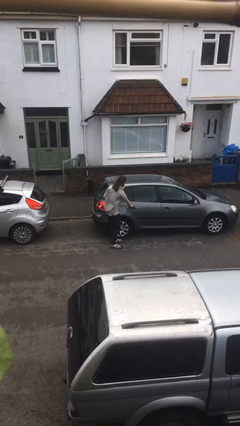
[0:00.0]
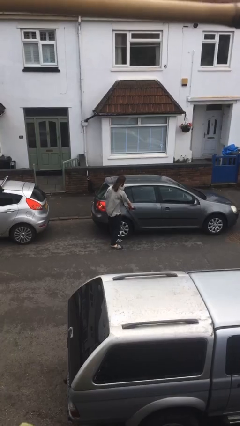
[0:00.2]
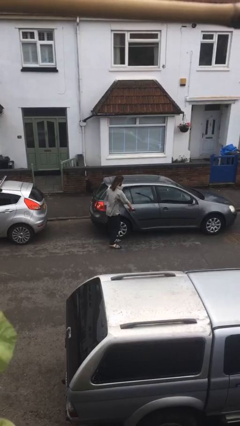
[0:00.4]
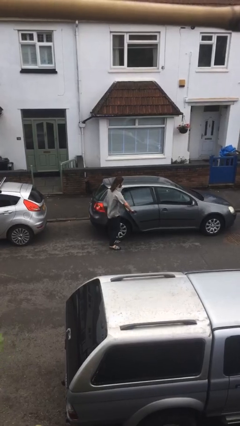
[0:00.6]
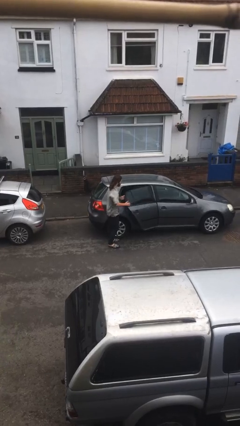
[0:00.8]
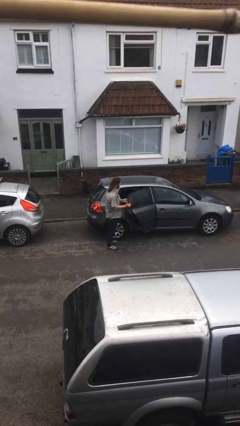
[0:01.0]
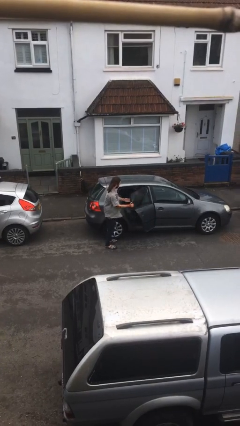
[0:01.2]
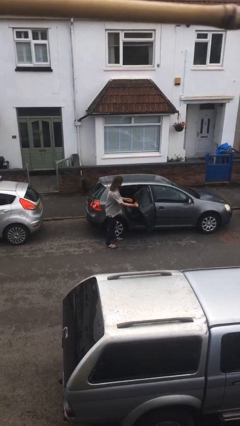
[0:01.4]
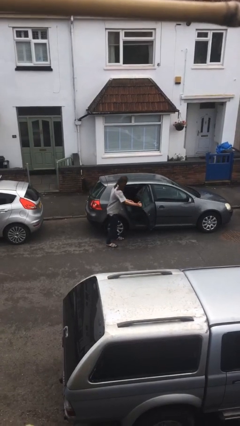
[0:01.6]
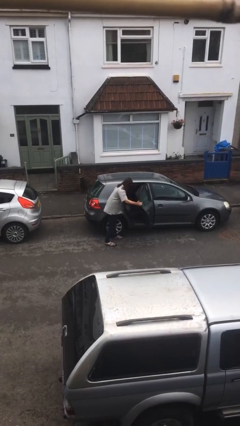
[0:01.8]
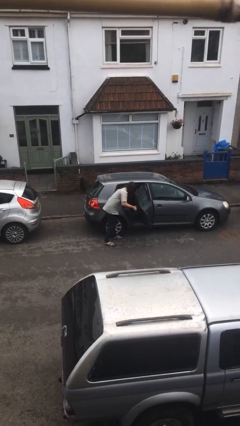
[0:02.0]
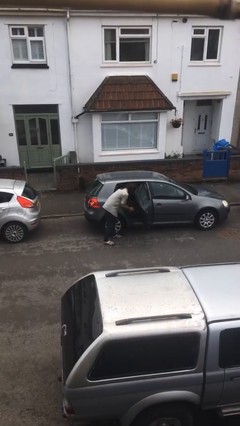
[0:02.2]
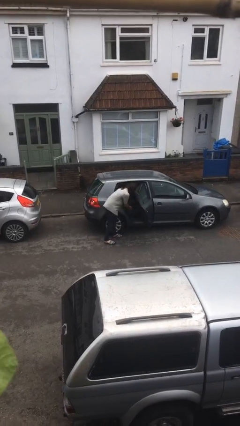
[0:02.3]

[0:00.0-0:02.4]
person opens car door

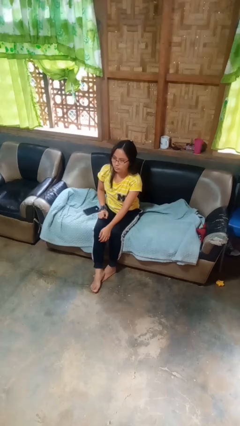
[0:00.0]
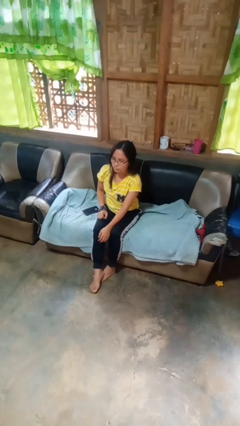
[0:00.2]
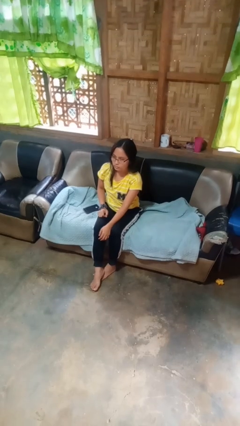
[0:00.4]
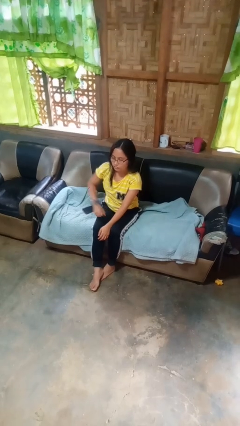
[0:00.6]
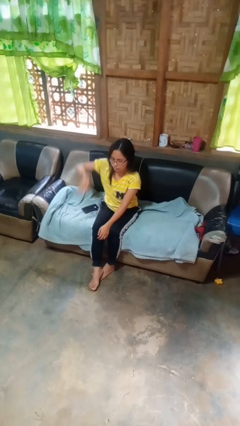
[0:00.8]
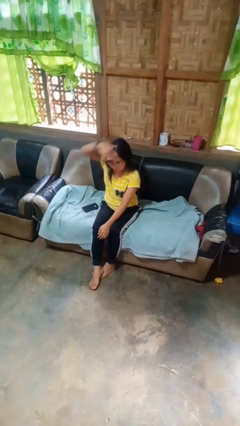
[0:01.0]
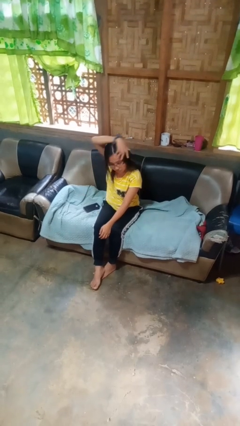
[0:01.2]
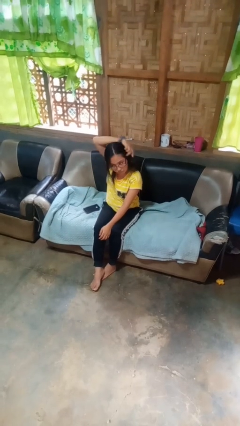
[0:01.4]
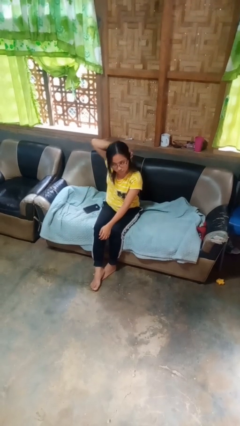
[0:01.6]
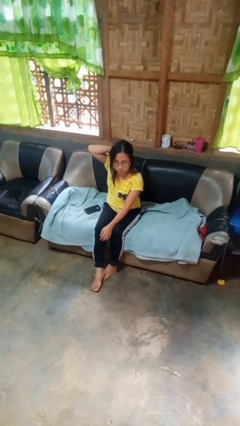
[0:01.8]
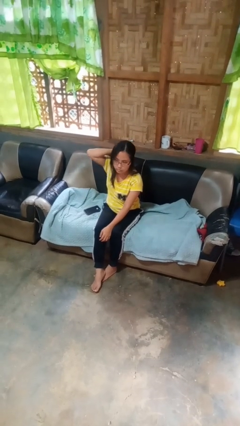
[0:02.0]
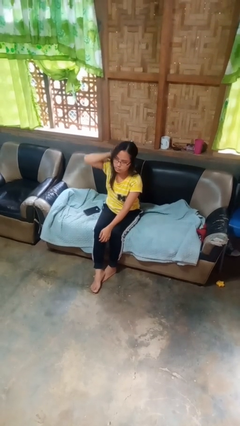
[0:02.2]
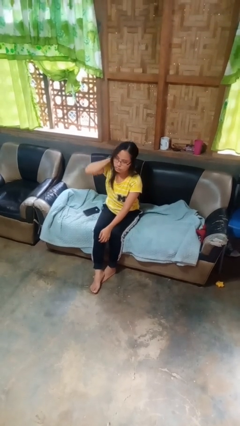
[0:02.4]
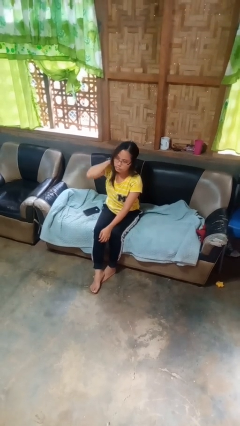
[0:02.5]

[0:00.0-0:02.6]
person strokes hair

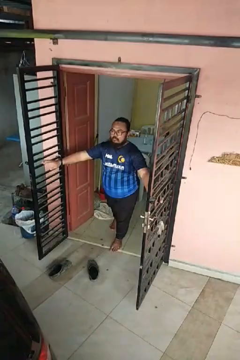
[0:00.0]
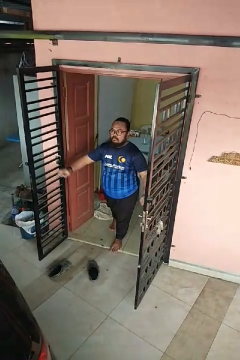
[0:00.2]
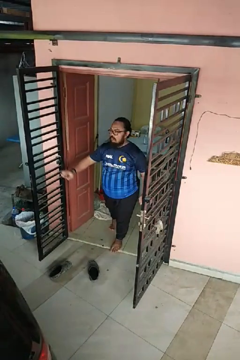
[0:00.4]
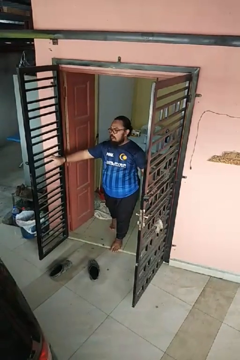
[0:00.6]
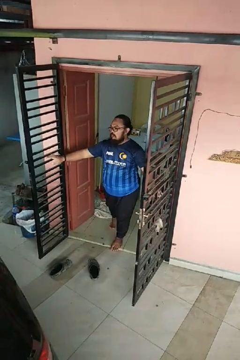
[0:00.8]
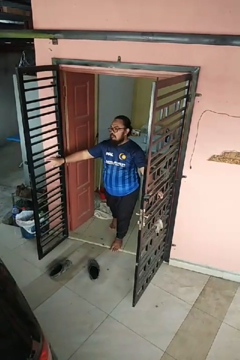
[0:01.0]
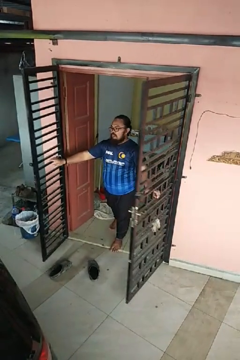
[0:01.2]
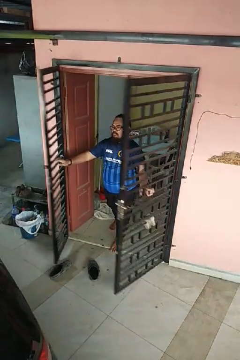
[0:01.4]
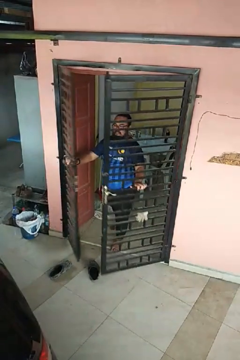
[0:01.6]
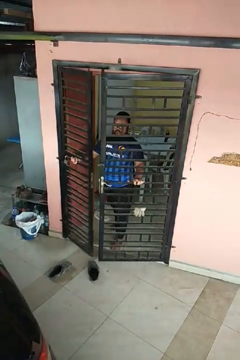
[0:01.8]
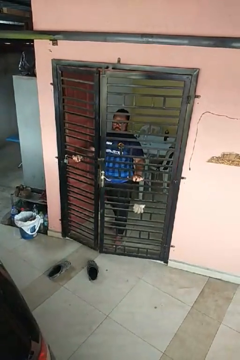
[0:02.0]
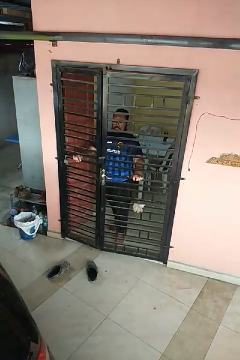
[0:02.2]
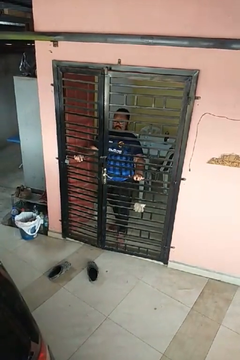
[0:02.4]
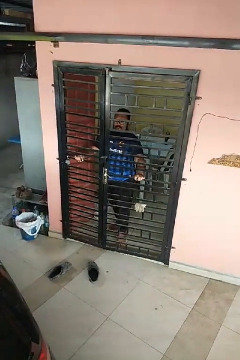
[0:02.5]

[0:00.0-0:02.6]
person closes gate

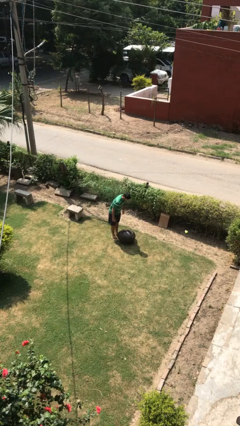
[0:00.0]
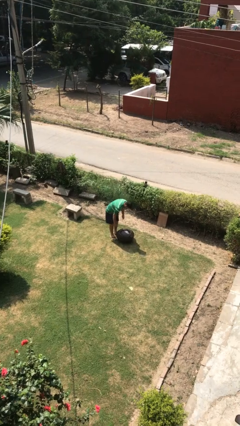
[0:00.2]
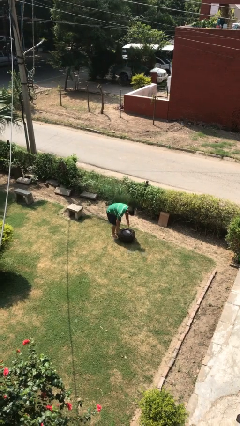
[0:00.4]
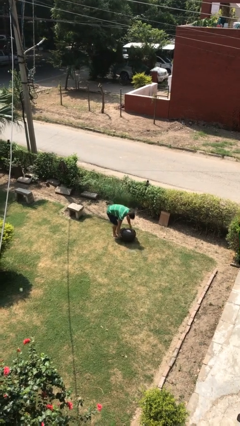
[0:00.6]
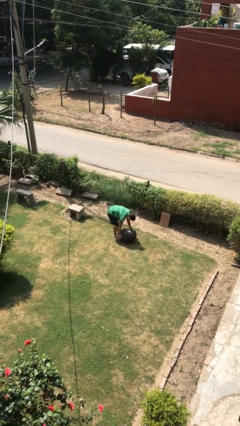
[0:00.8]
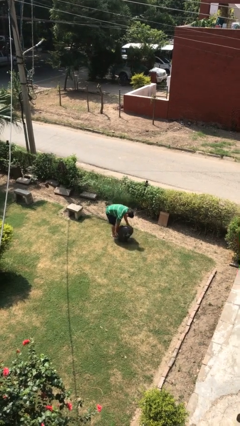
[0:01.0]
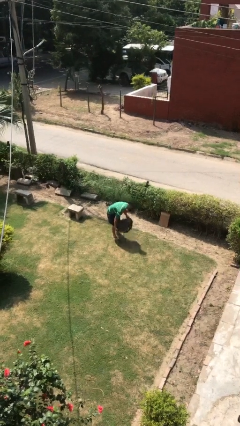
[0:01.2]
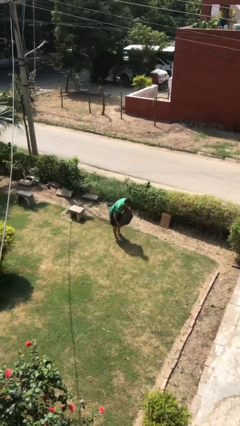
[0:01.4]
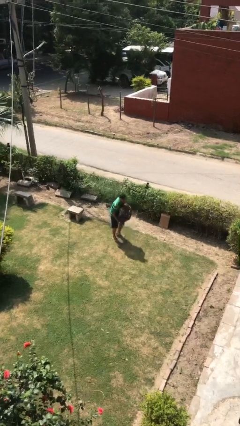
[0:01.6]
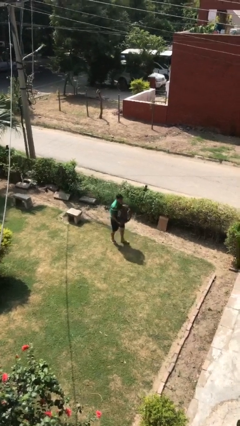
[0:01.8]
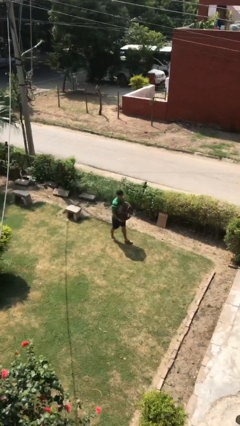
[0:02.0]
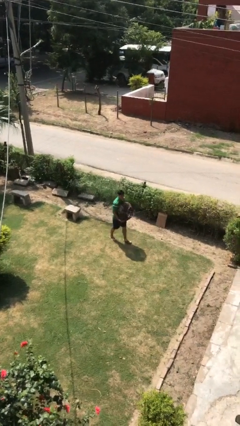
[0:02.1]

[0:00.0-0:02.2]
person picks up object from floor

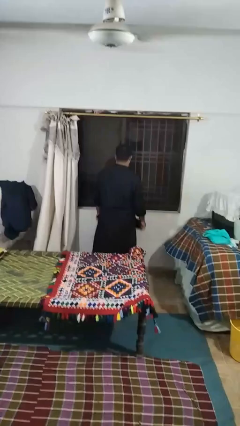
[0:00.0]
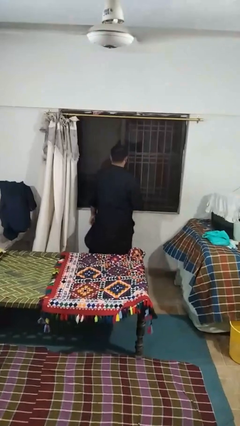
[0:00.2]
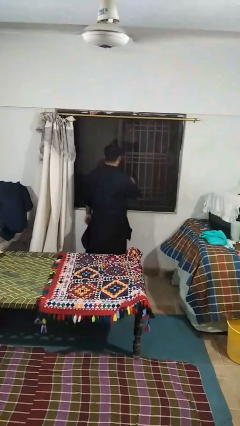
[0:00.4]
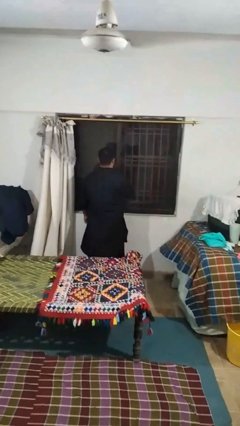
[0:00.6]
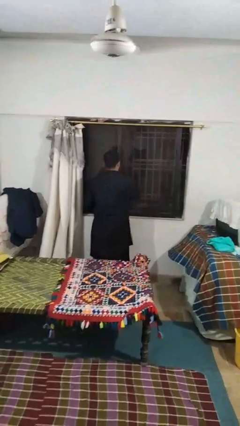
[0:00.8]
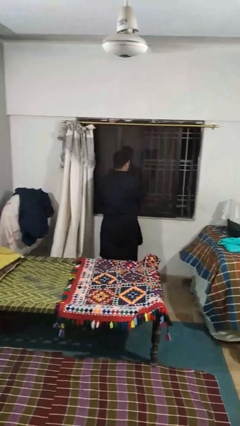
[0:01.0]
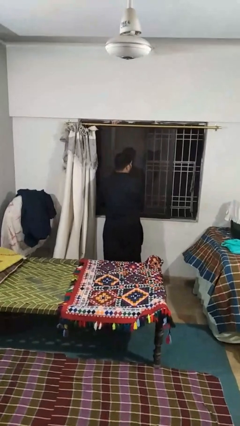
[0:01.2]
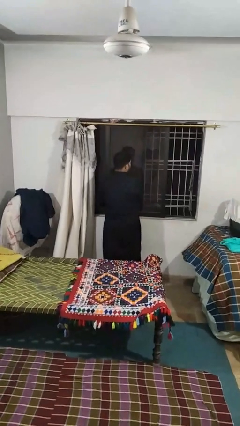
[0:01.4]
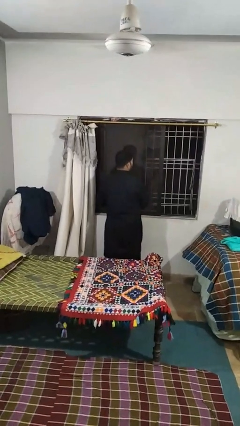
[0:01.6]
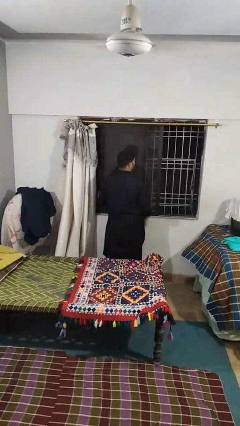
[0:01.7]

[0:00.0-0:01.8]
person opens sliding door

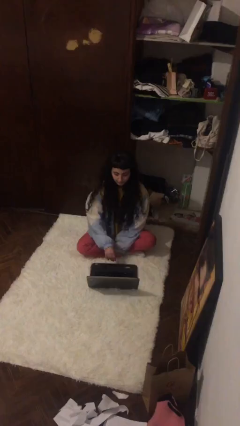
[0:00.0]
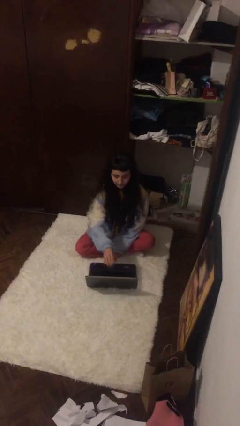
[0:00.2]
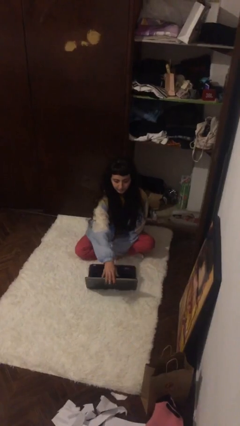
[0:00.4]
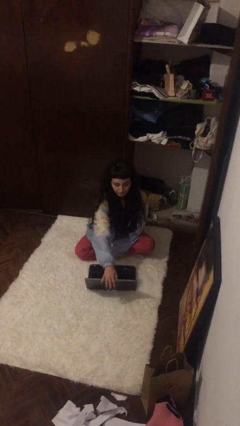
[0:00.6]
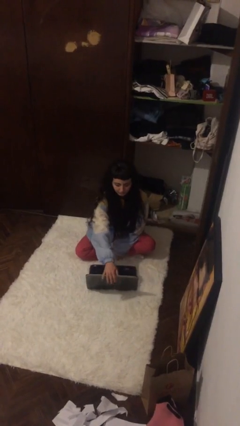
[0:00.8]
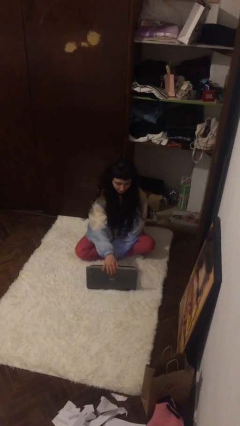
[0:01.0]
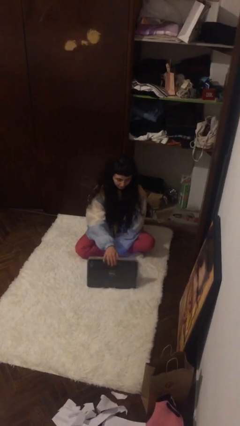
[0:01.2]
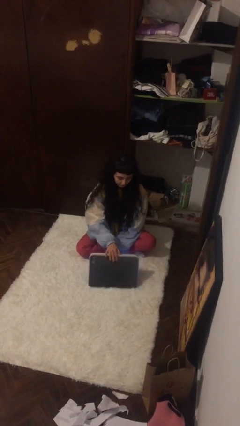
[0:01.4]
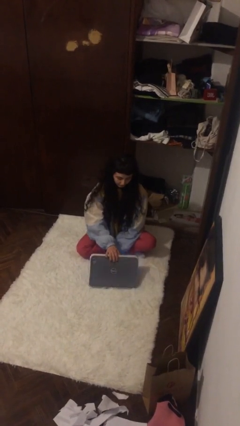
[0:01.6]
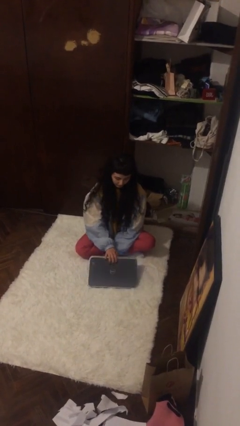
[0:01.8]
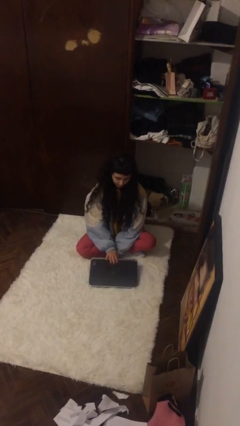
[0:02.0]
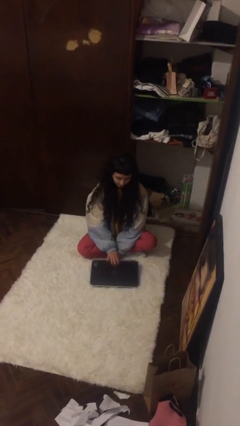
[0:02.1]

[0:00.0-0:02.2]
person closes laptop

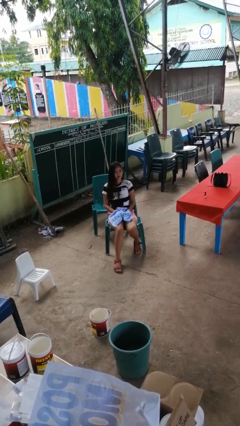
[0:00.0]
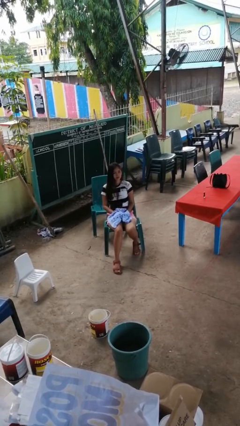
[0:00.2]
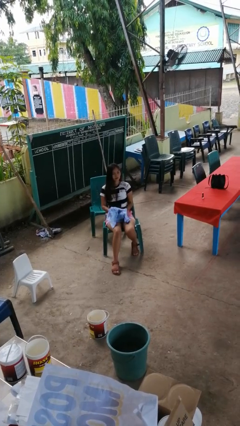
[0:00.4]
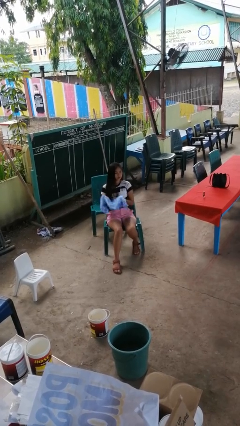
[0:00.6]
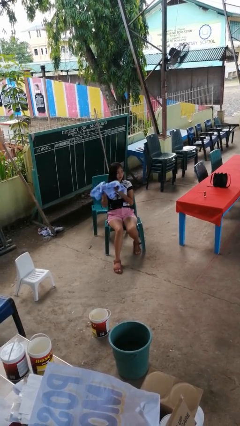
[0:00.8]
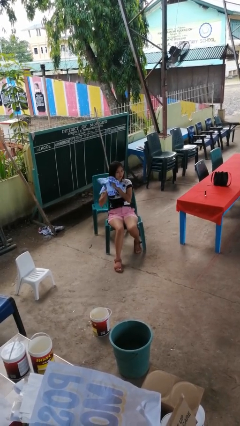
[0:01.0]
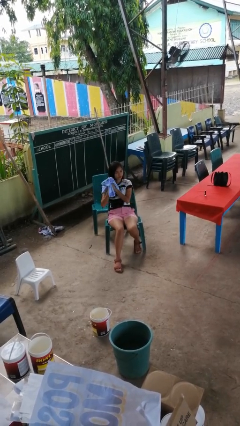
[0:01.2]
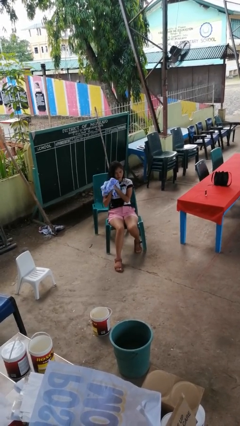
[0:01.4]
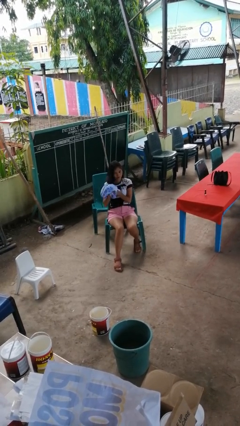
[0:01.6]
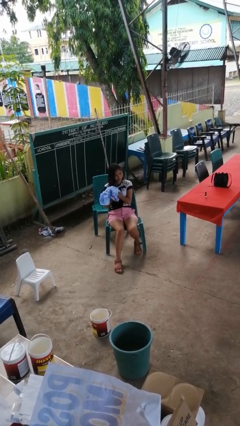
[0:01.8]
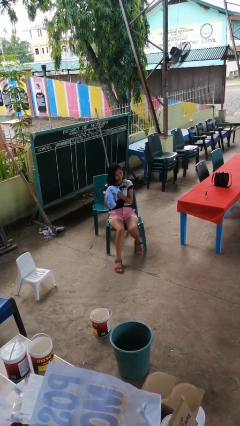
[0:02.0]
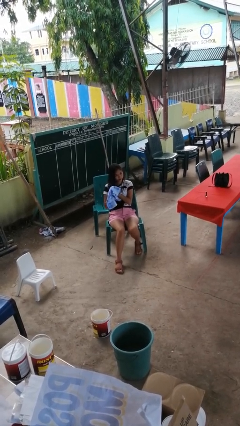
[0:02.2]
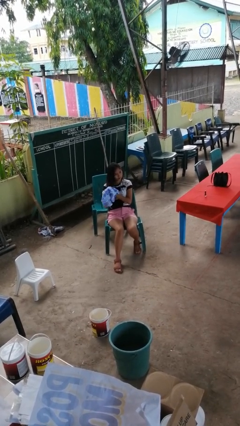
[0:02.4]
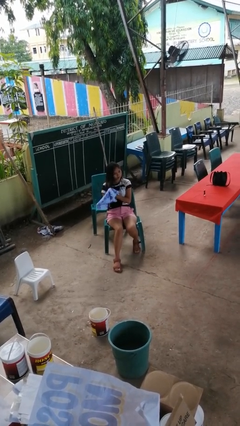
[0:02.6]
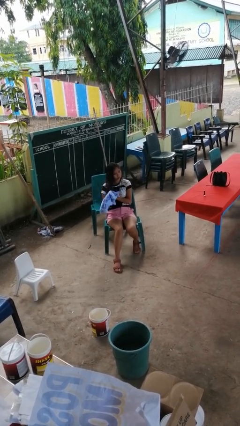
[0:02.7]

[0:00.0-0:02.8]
person dries hair with towel

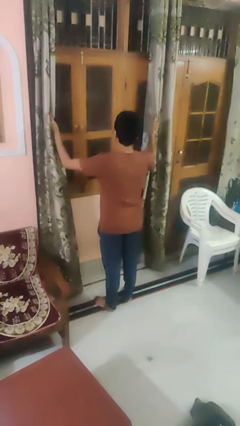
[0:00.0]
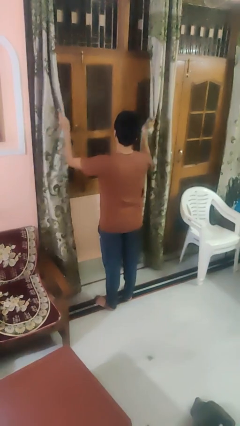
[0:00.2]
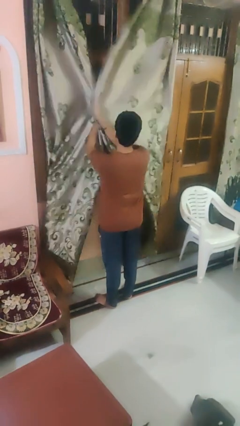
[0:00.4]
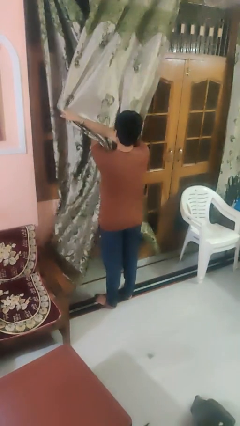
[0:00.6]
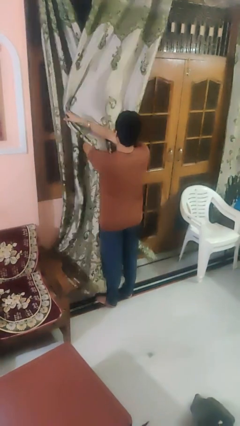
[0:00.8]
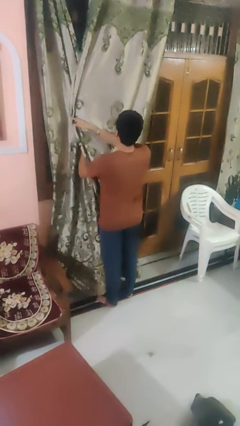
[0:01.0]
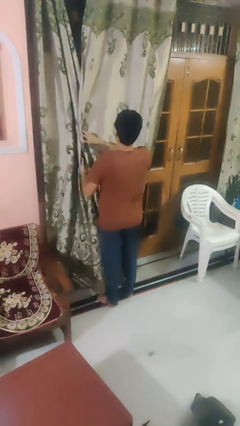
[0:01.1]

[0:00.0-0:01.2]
person closes curtains
